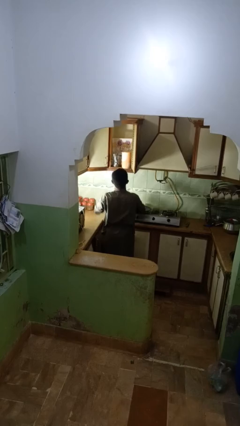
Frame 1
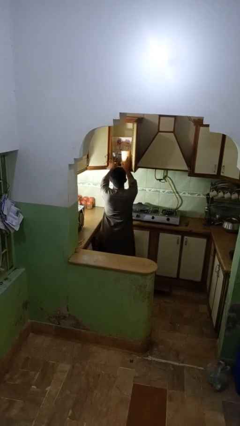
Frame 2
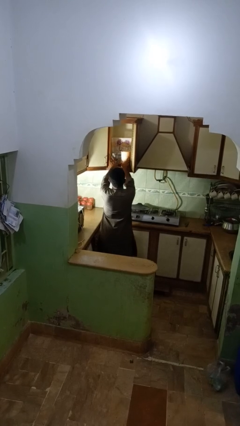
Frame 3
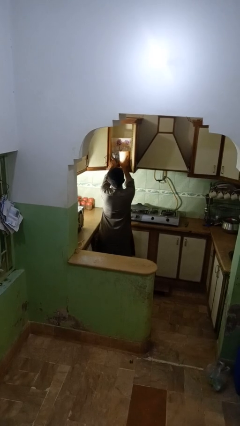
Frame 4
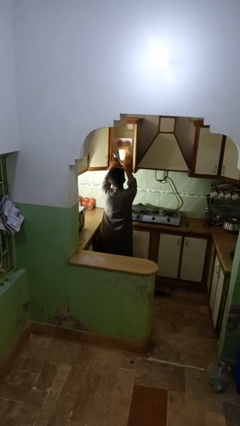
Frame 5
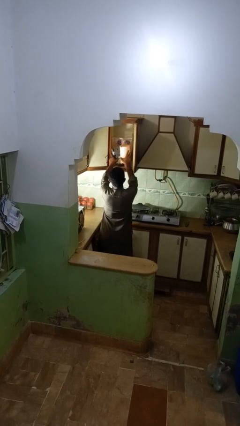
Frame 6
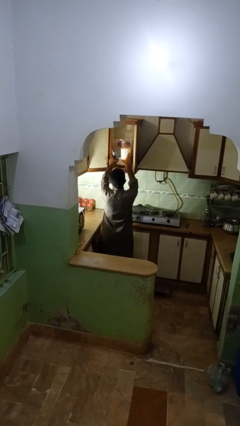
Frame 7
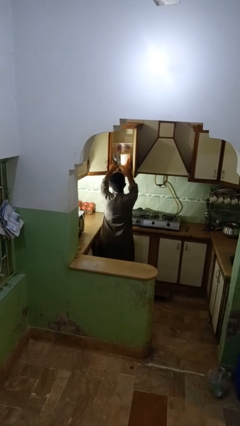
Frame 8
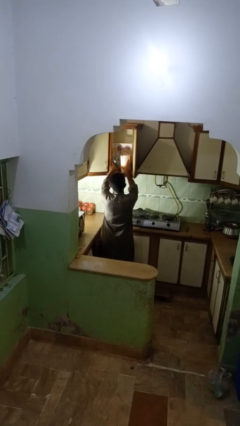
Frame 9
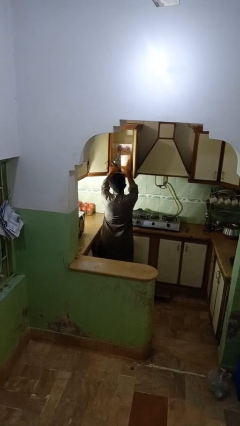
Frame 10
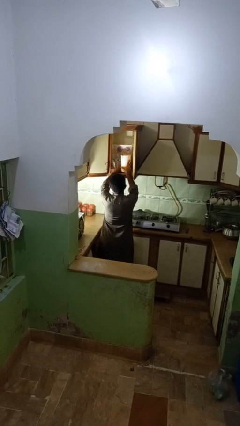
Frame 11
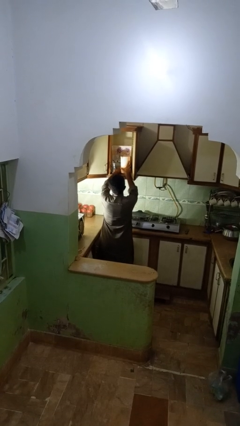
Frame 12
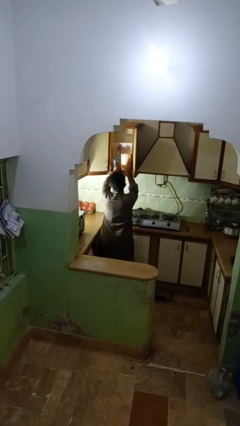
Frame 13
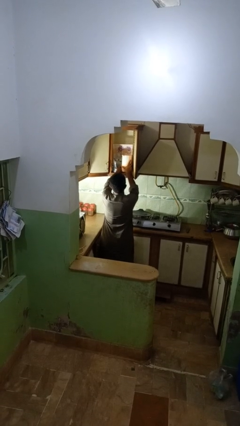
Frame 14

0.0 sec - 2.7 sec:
person searches in kitchen drawer

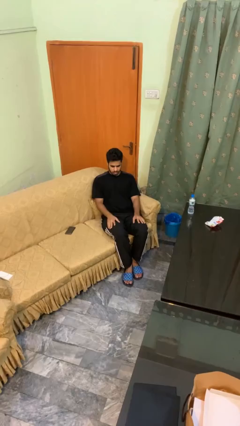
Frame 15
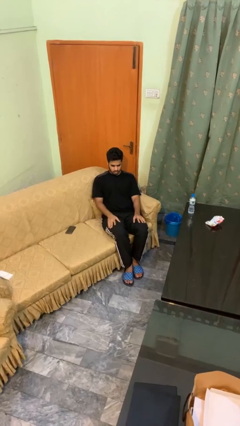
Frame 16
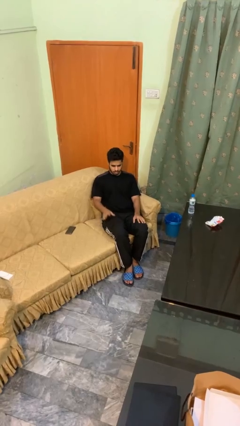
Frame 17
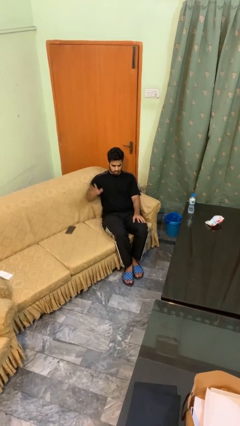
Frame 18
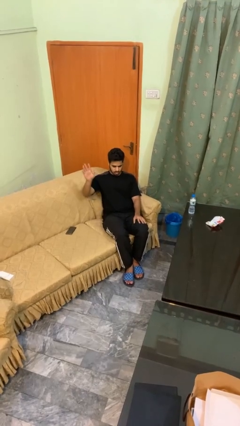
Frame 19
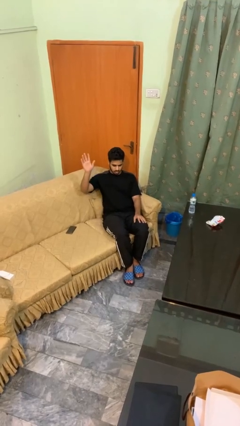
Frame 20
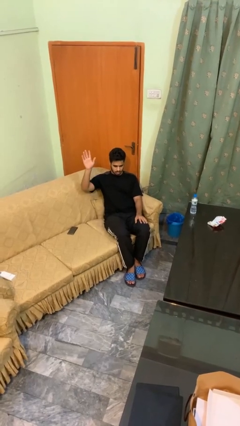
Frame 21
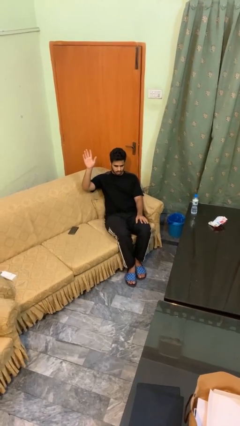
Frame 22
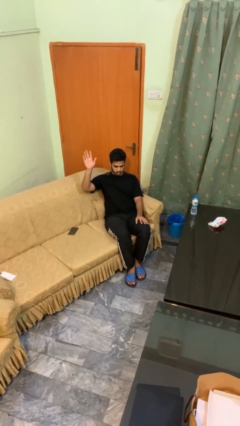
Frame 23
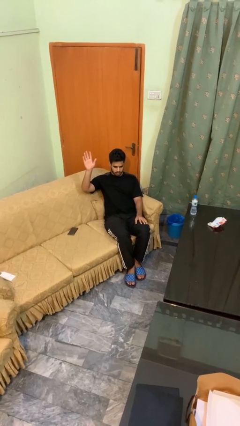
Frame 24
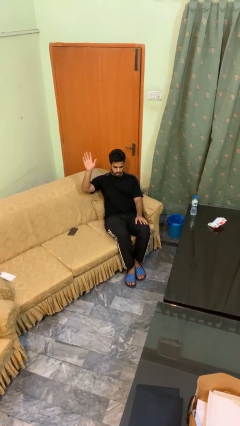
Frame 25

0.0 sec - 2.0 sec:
person gestures raise hand

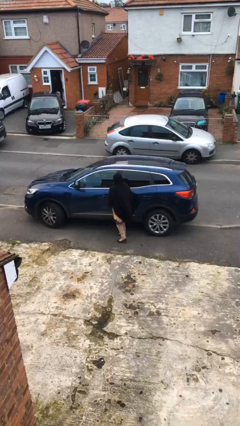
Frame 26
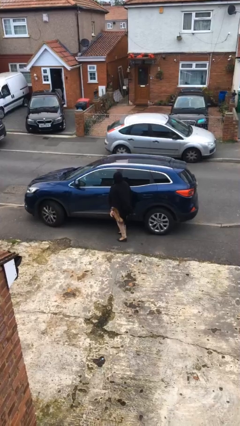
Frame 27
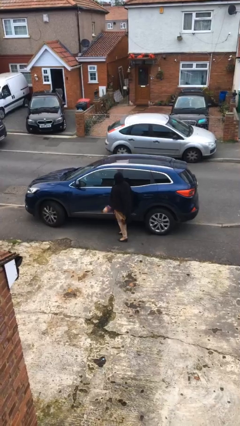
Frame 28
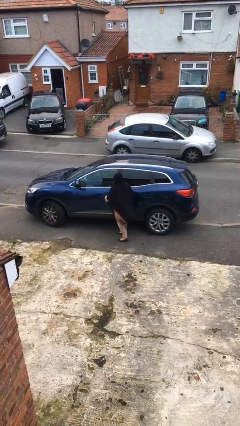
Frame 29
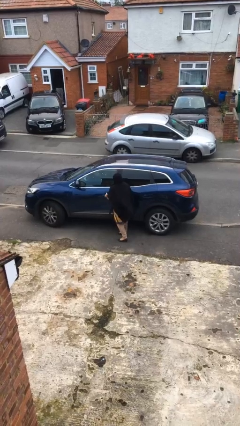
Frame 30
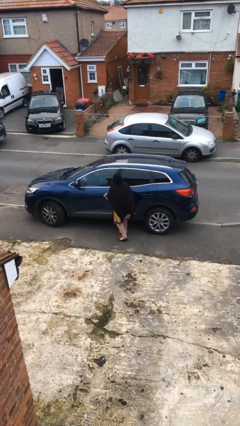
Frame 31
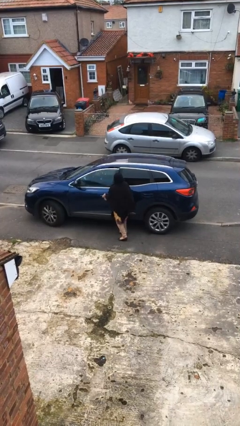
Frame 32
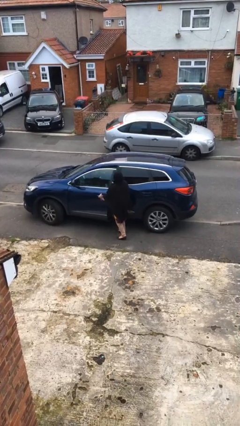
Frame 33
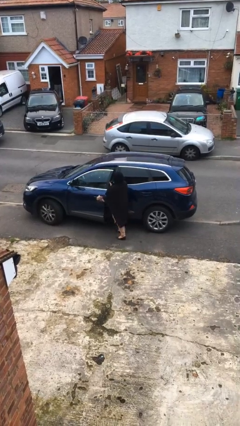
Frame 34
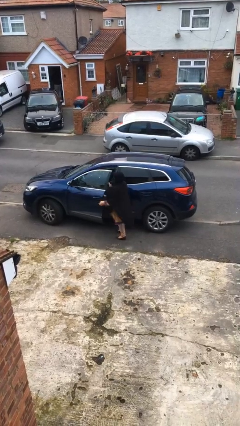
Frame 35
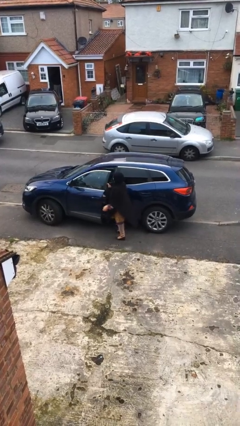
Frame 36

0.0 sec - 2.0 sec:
person opens car door

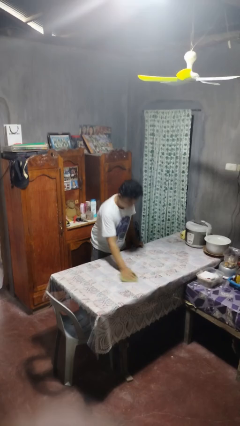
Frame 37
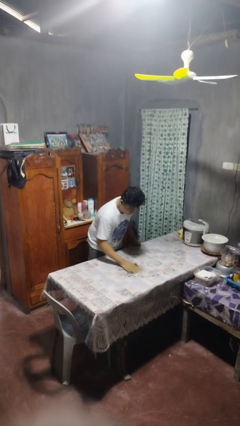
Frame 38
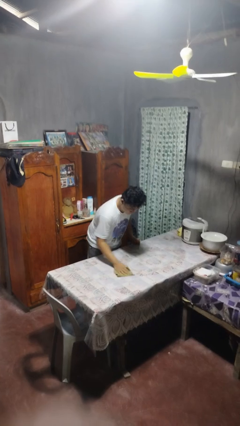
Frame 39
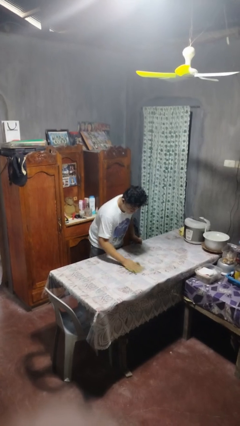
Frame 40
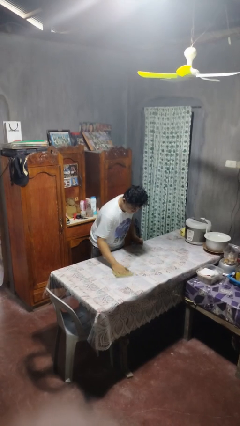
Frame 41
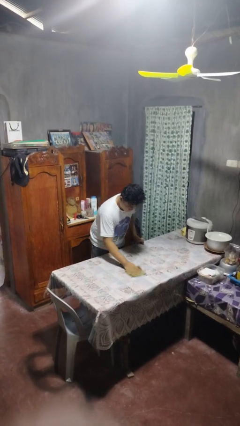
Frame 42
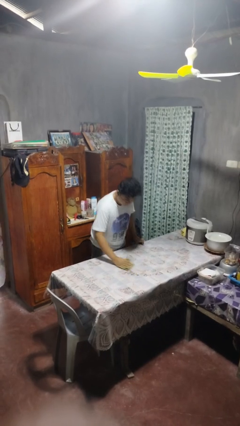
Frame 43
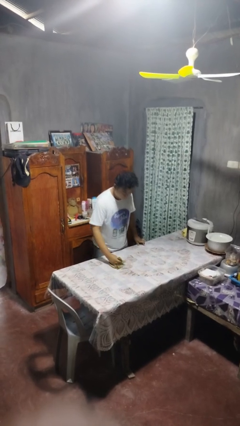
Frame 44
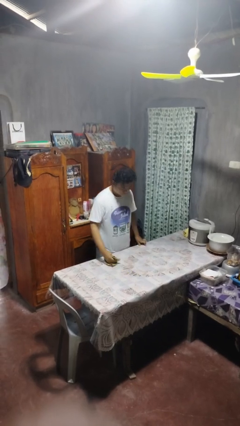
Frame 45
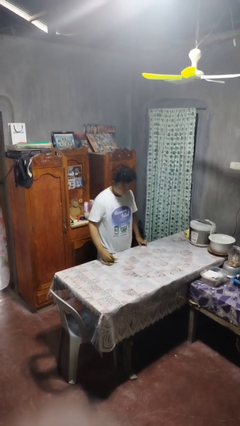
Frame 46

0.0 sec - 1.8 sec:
person cleans table with rag

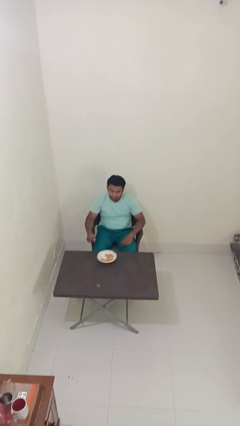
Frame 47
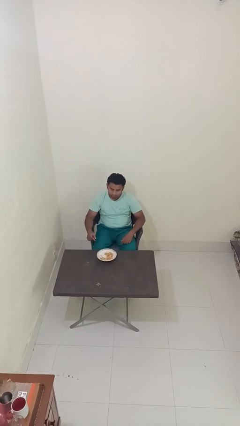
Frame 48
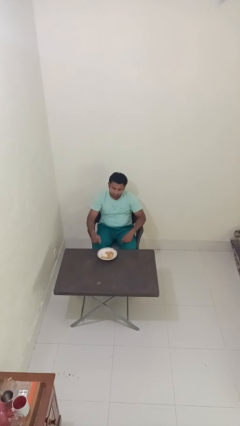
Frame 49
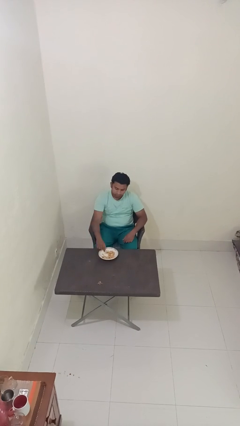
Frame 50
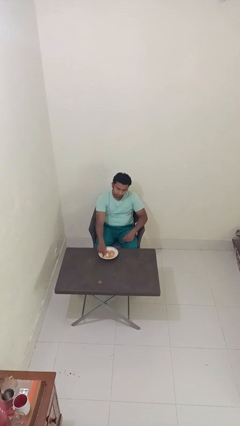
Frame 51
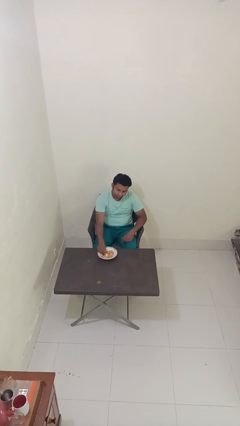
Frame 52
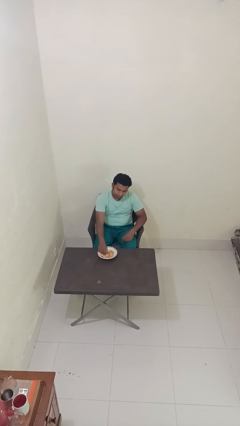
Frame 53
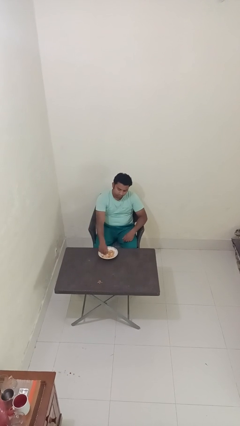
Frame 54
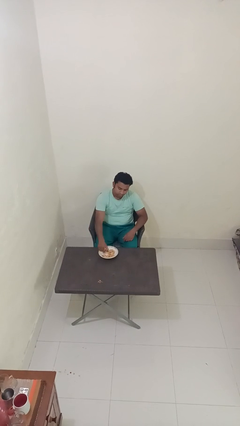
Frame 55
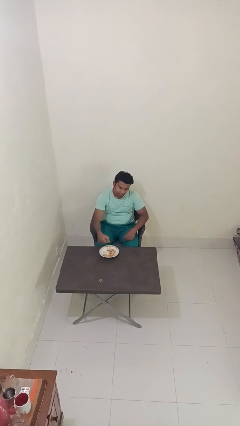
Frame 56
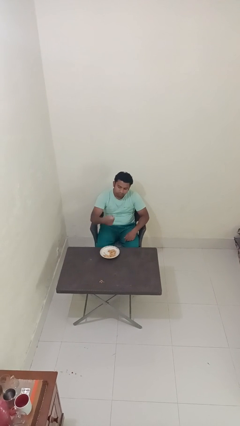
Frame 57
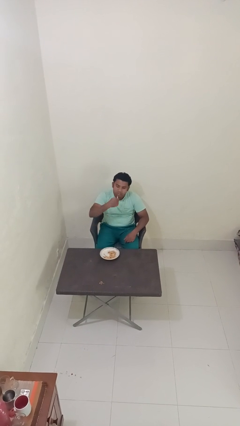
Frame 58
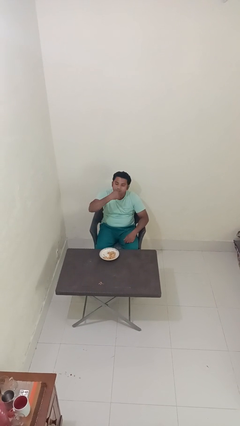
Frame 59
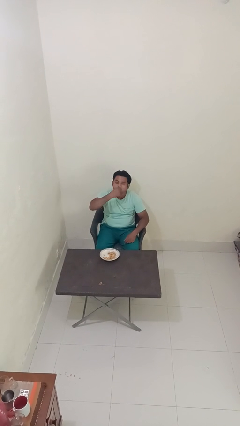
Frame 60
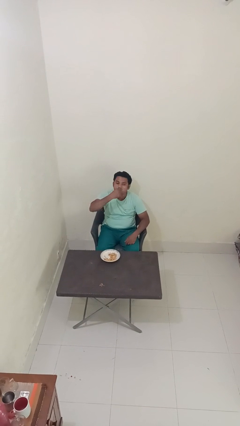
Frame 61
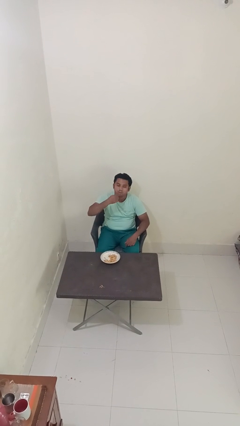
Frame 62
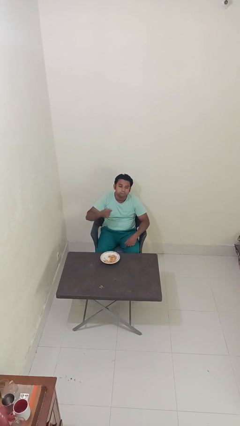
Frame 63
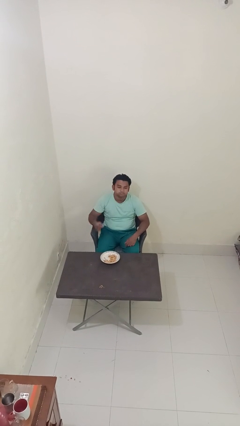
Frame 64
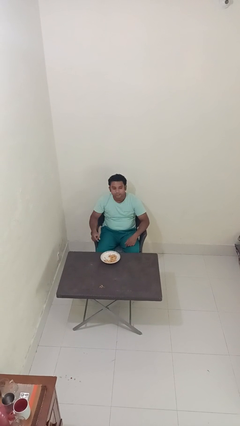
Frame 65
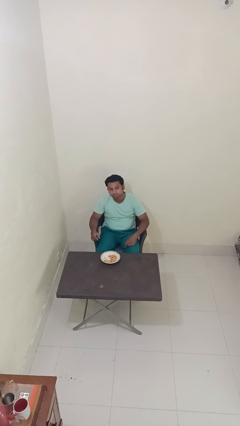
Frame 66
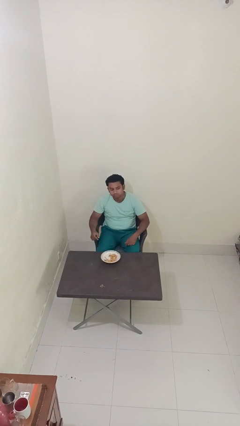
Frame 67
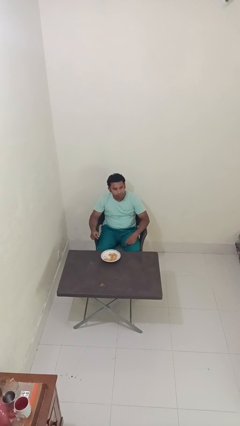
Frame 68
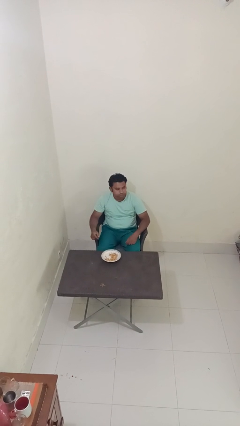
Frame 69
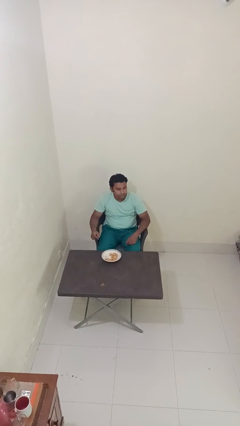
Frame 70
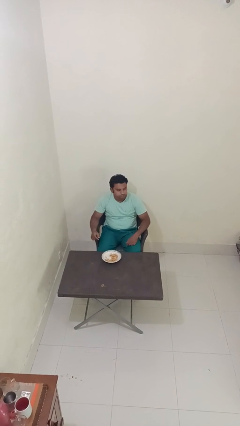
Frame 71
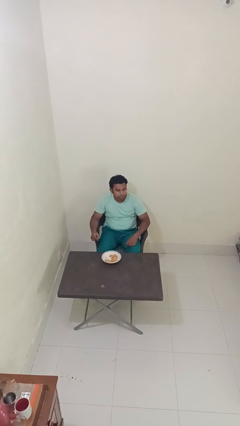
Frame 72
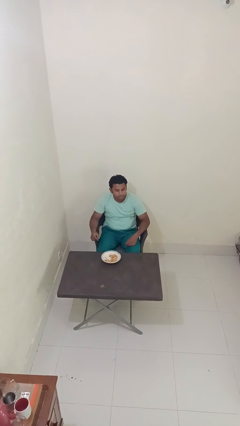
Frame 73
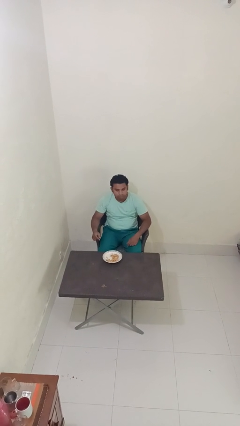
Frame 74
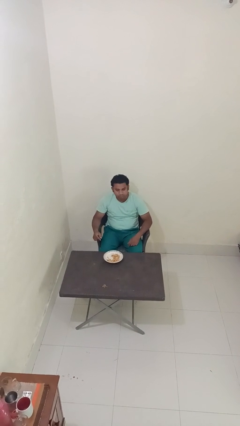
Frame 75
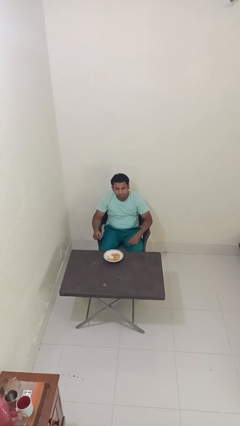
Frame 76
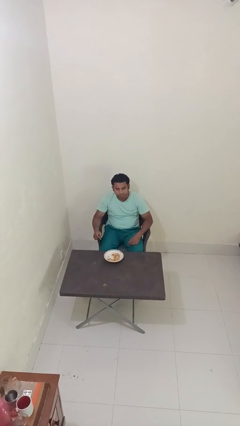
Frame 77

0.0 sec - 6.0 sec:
person eats with hands

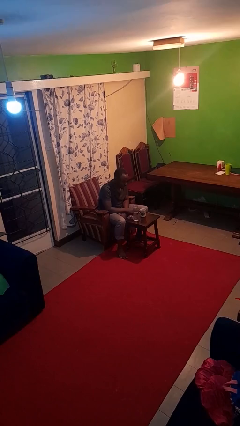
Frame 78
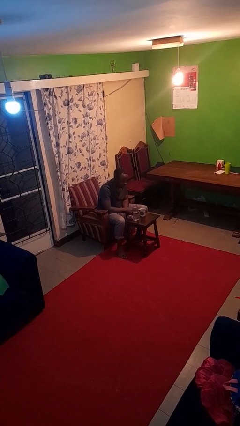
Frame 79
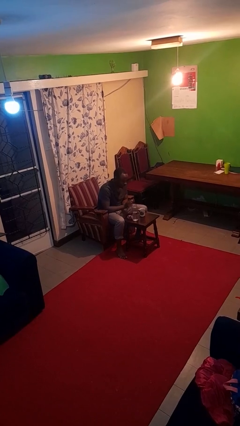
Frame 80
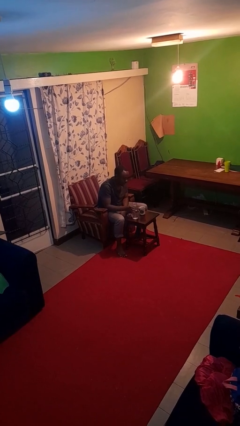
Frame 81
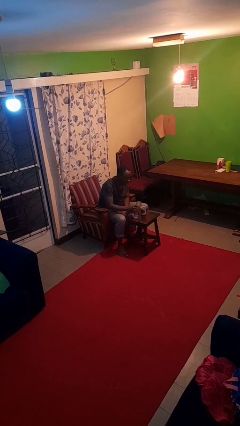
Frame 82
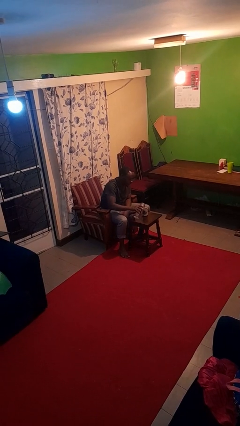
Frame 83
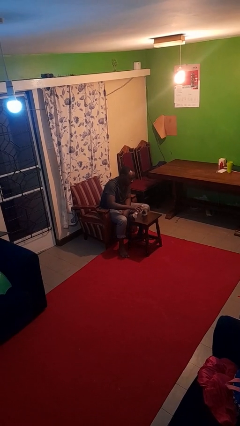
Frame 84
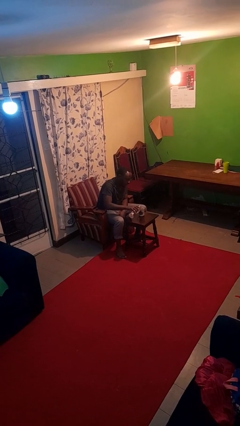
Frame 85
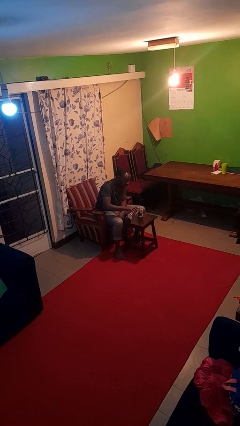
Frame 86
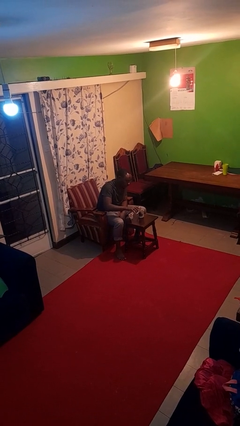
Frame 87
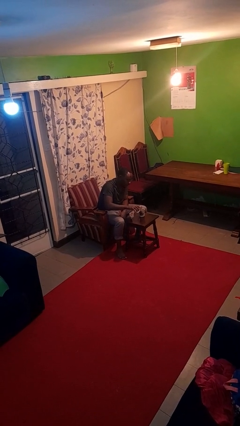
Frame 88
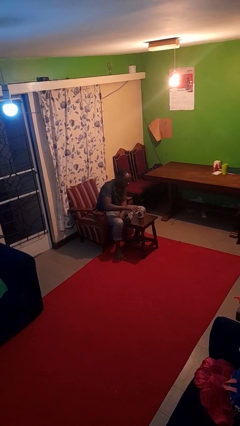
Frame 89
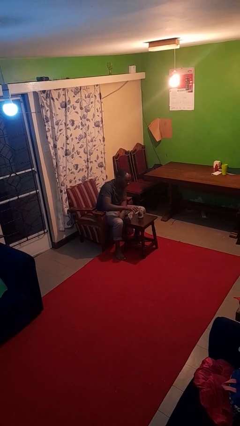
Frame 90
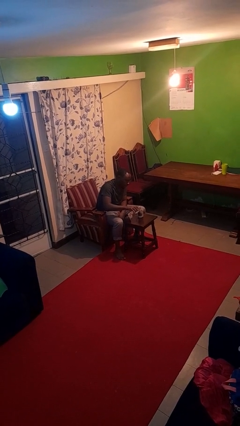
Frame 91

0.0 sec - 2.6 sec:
person pours liquid into cup

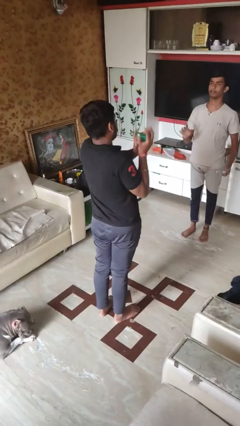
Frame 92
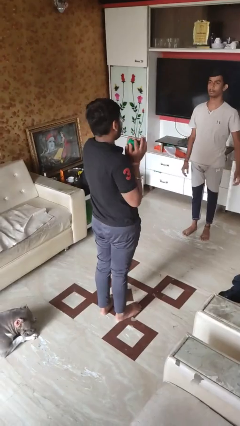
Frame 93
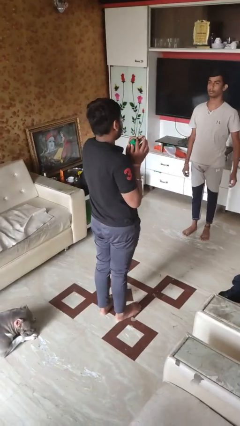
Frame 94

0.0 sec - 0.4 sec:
person catches object from person
